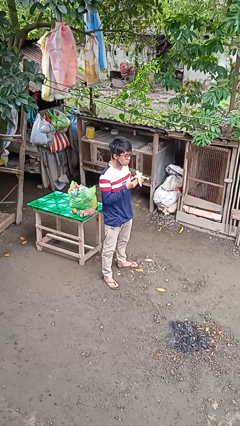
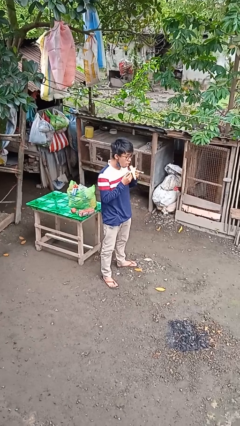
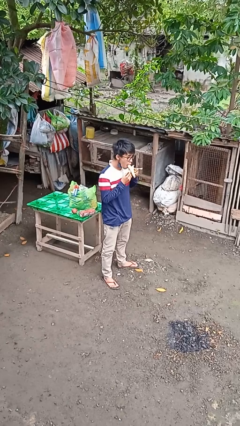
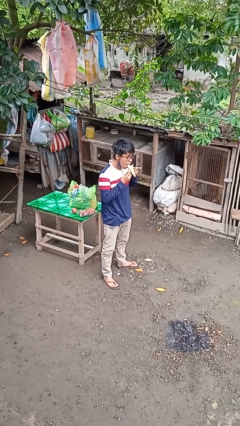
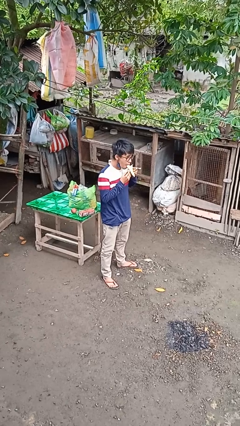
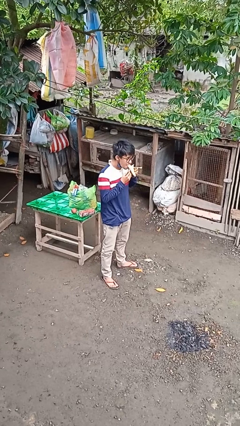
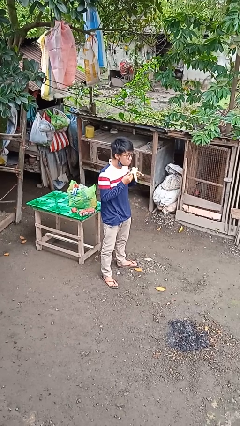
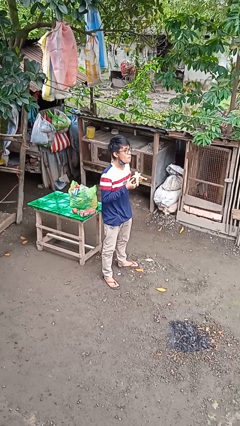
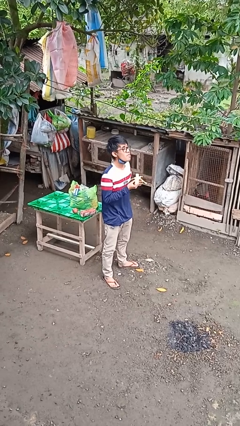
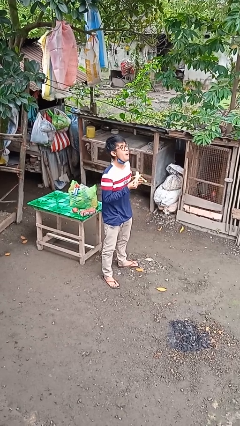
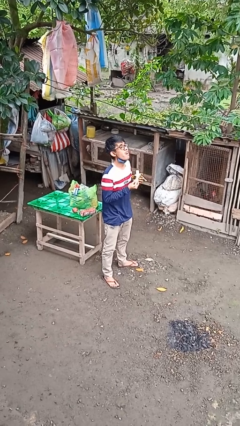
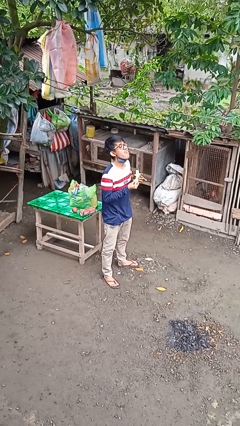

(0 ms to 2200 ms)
person eats banana

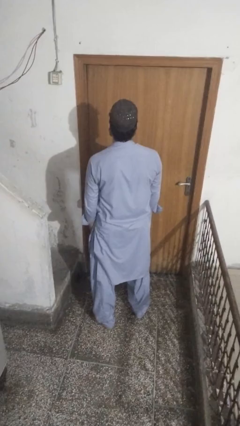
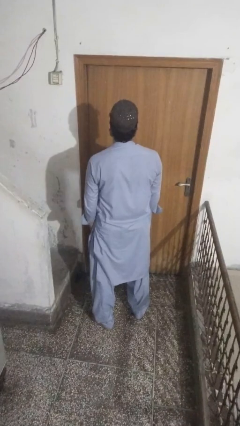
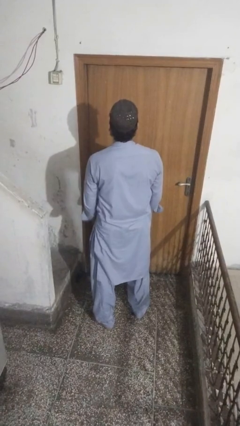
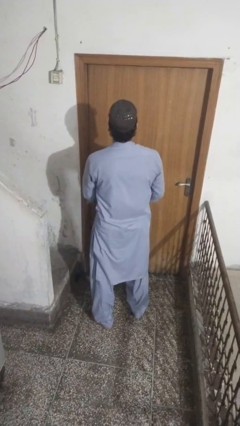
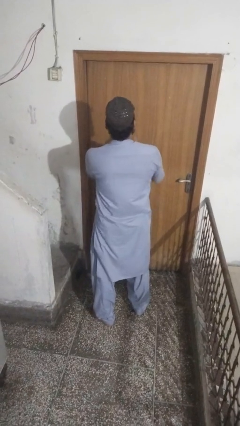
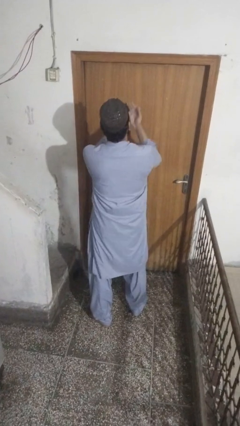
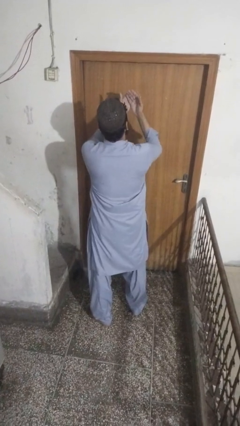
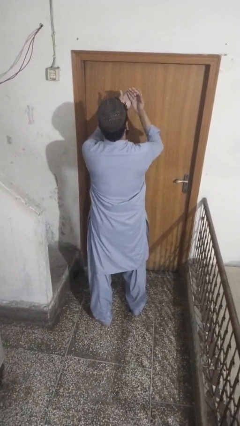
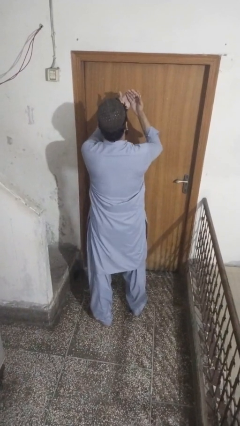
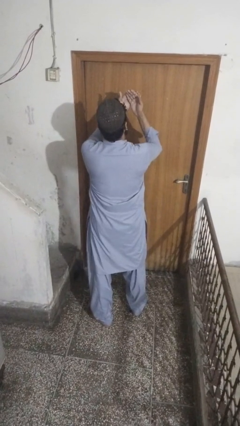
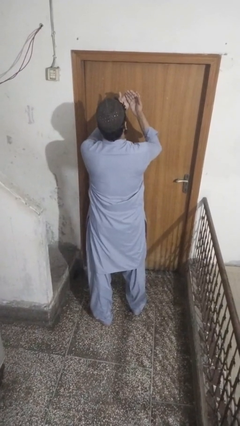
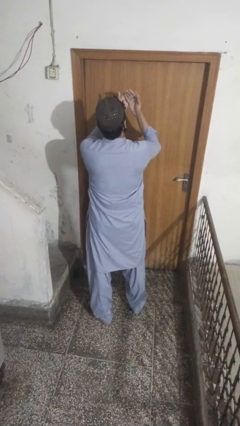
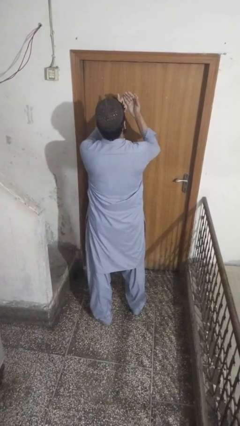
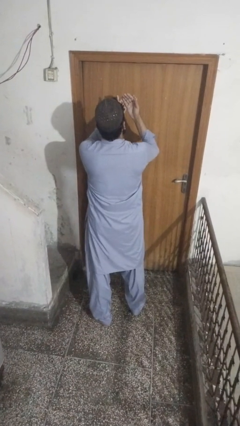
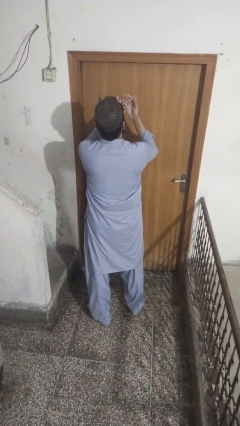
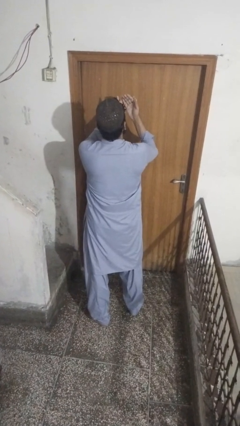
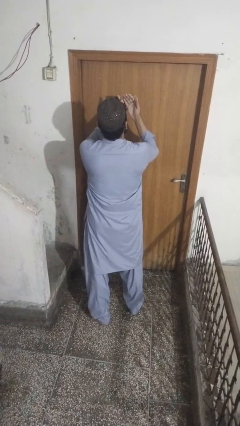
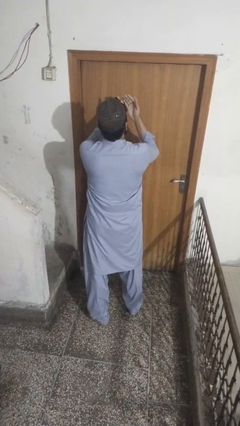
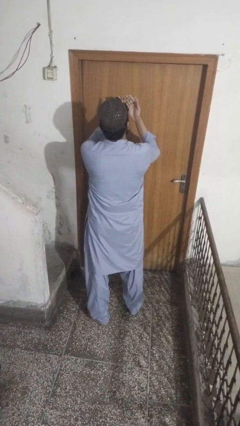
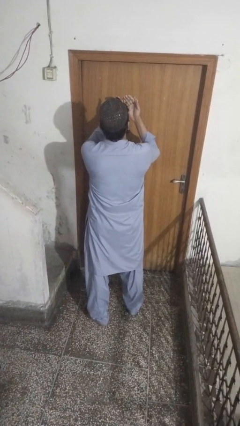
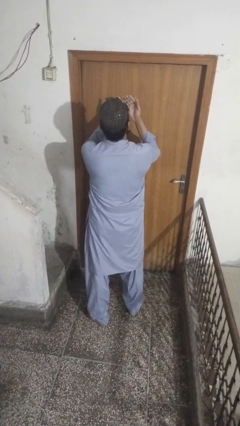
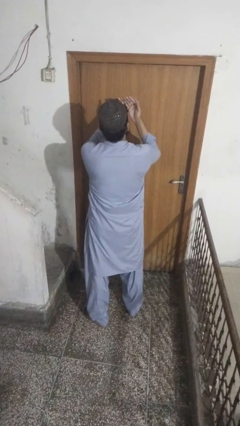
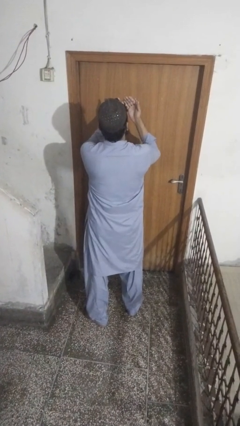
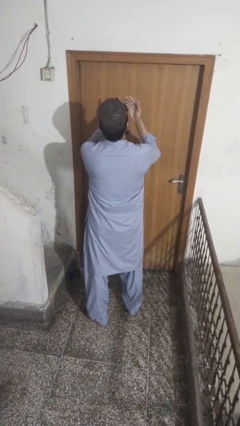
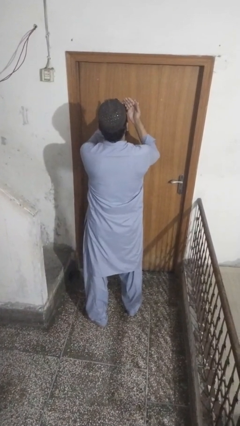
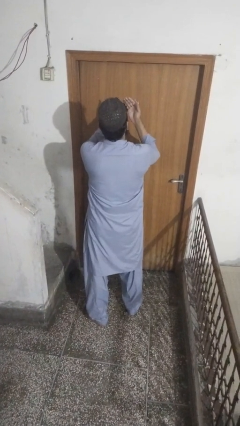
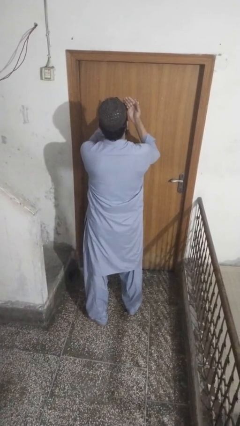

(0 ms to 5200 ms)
person prays

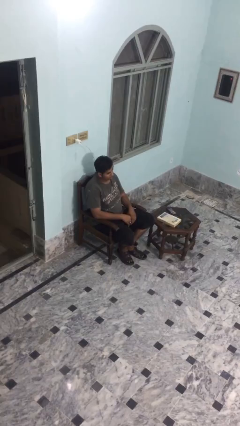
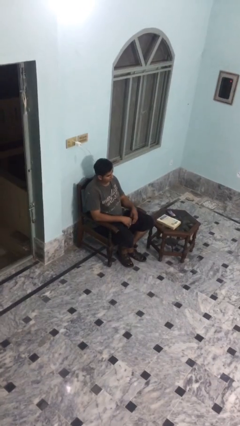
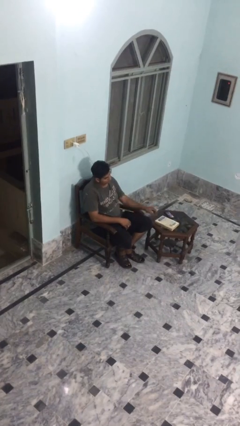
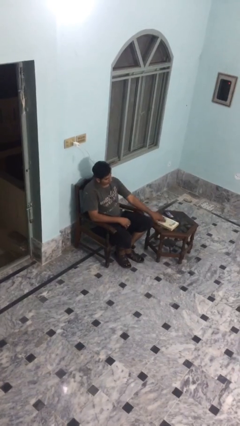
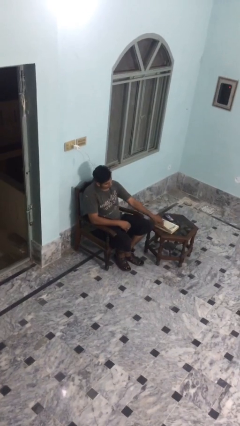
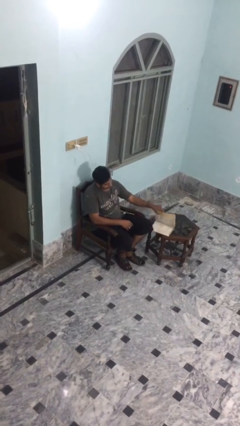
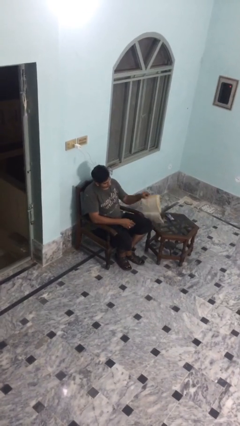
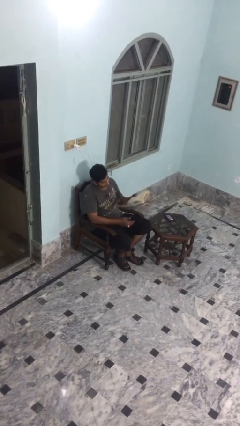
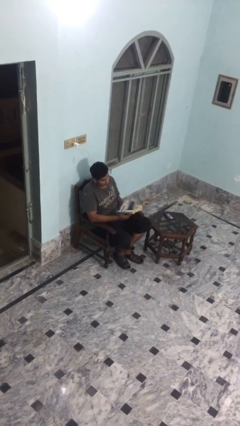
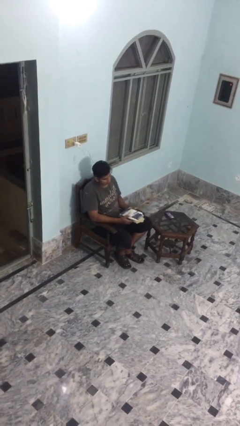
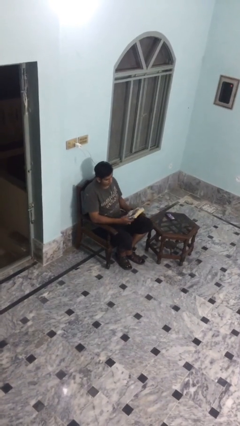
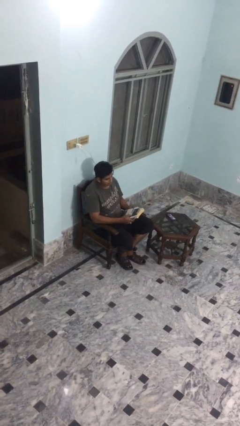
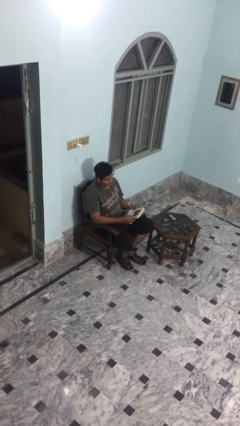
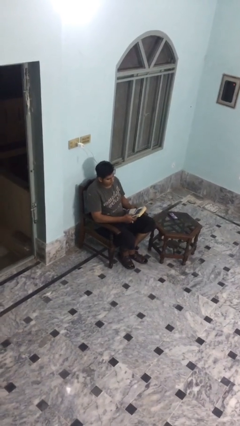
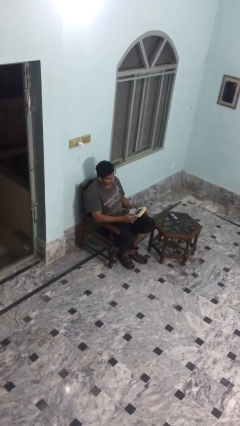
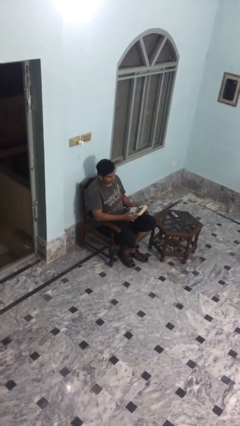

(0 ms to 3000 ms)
person picks up object from table

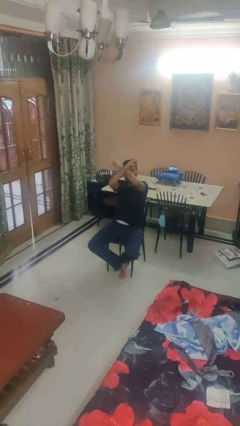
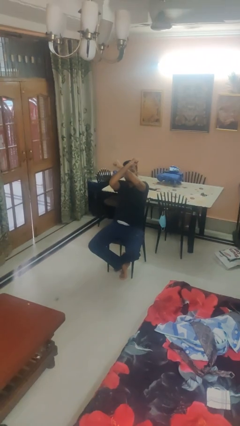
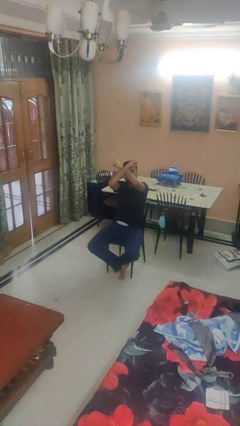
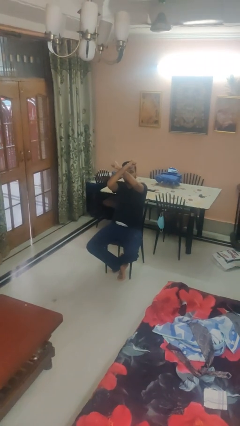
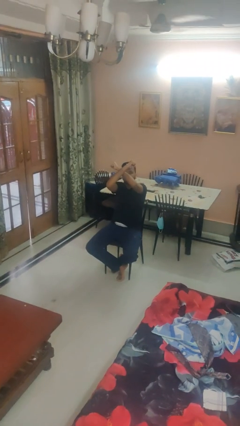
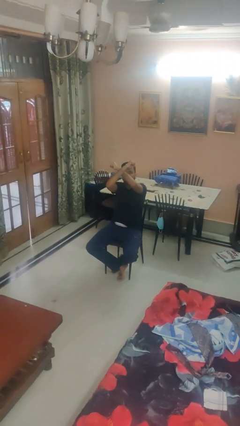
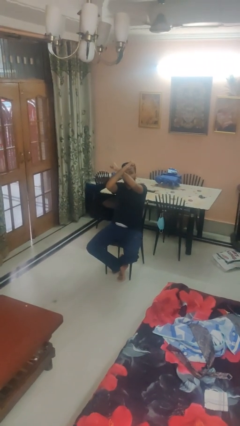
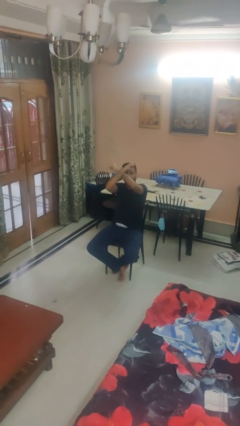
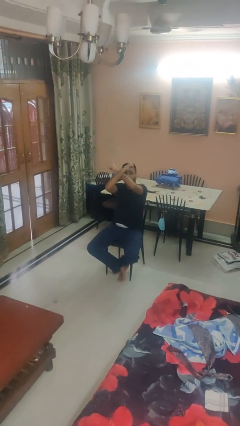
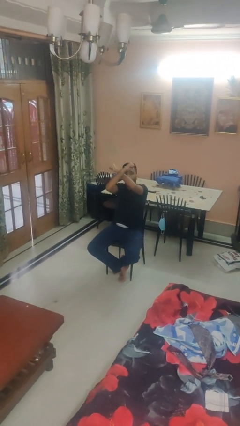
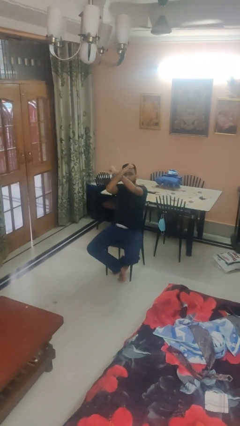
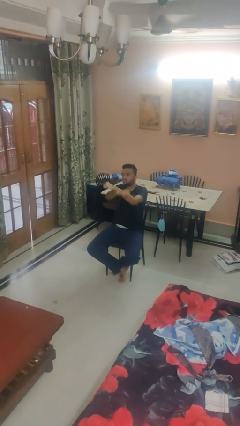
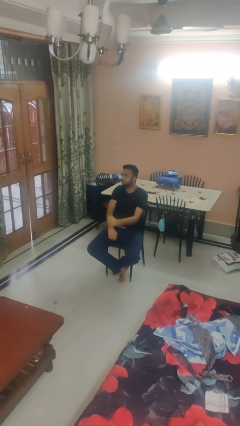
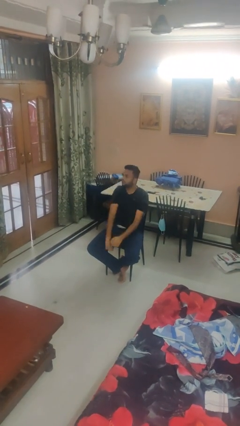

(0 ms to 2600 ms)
person gestures arms x

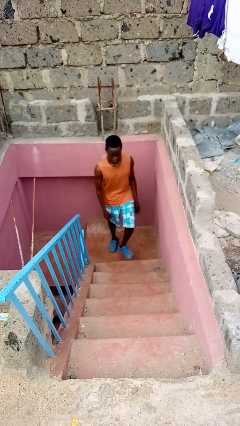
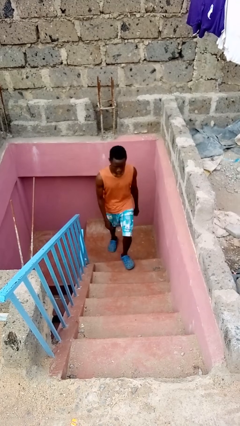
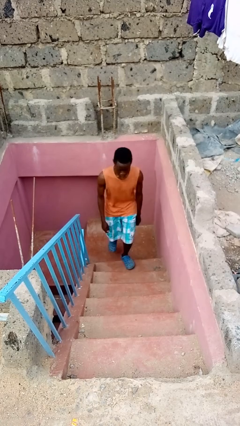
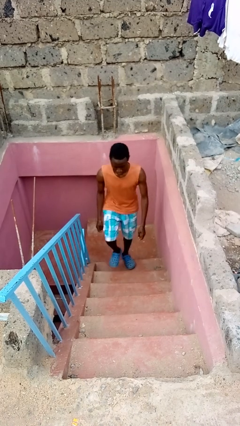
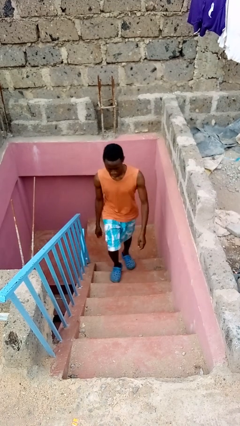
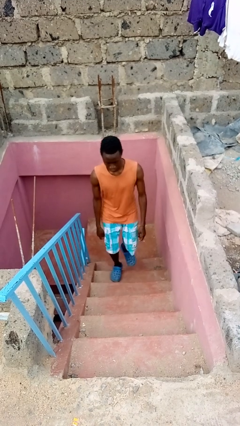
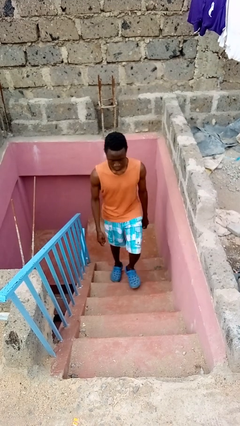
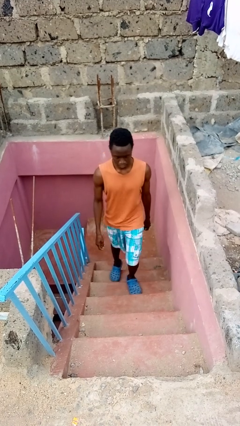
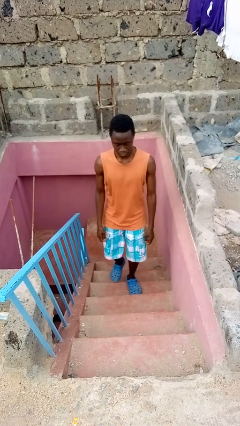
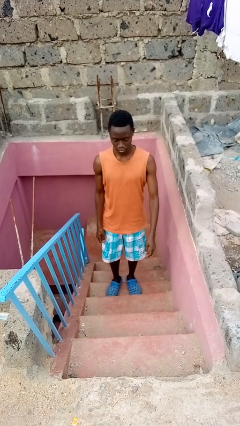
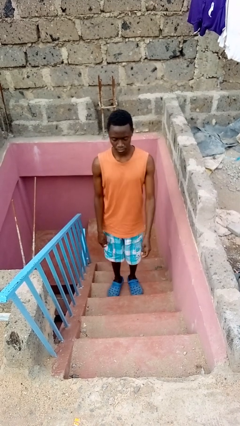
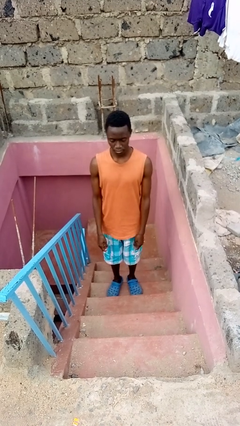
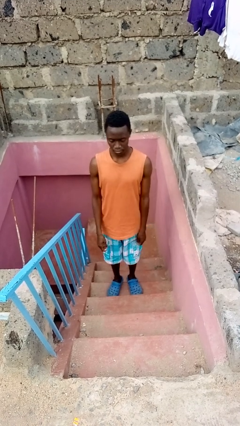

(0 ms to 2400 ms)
person climbs up stairs

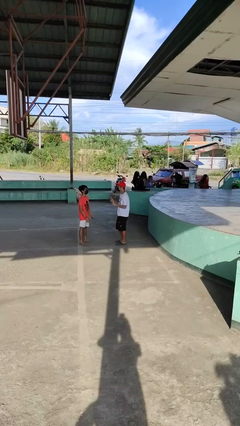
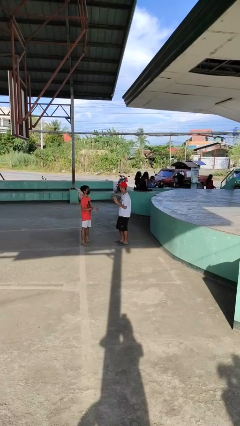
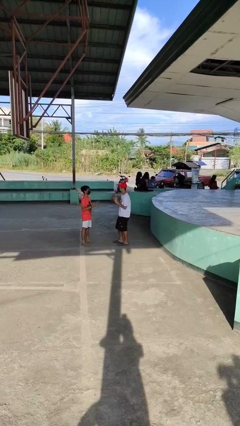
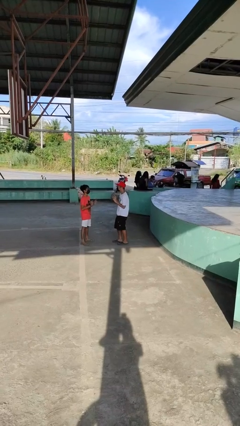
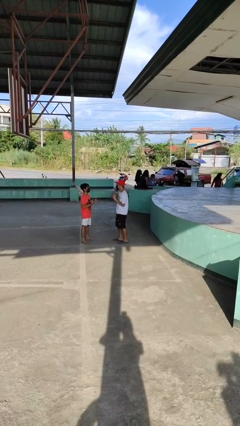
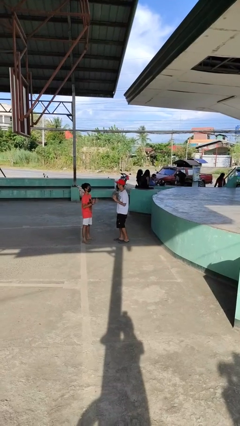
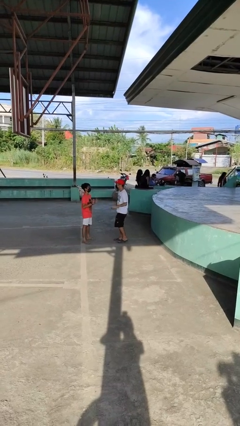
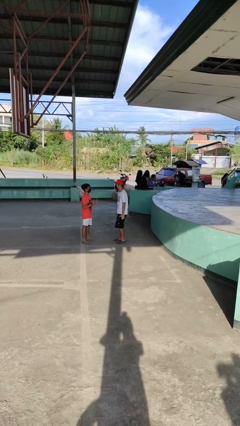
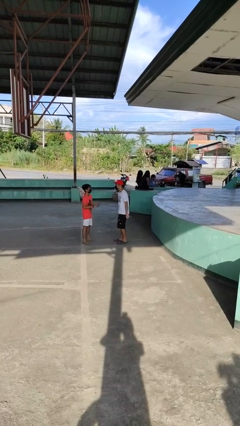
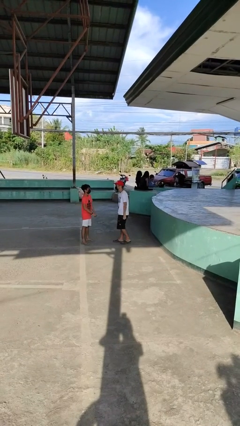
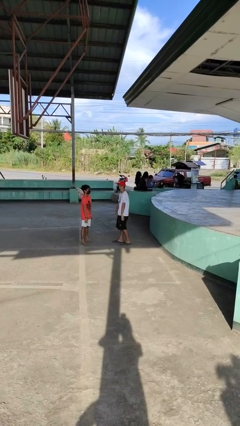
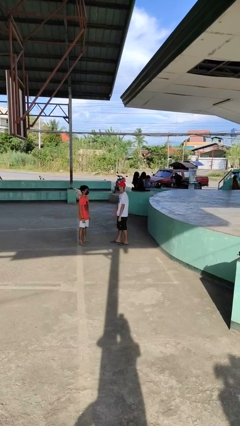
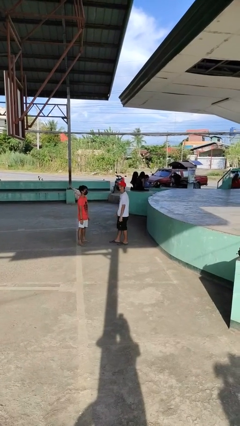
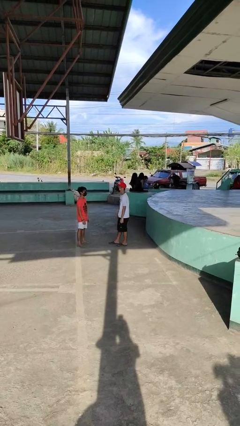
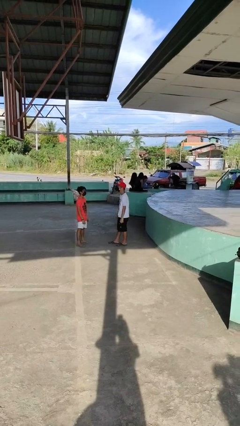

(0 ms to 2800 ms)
person talks to person
